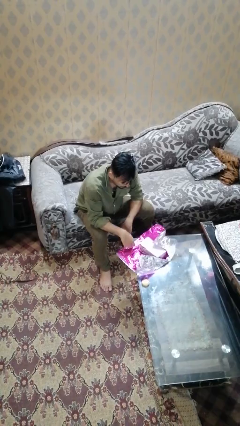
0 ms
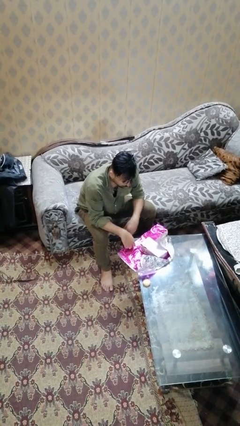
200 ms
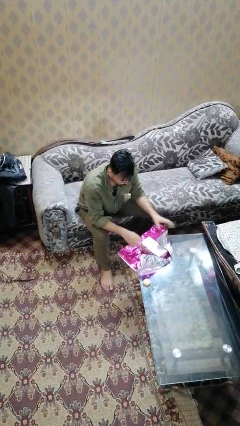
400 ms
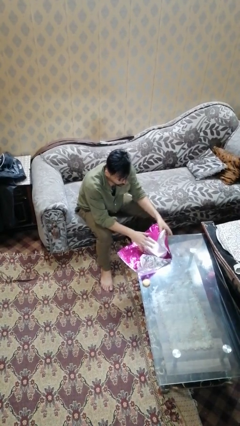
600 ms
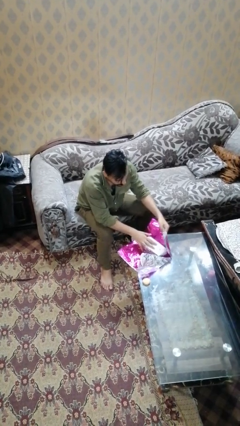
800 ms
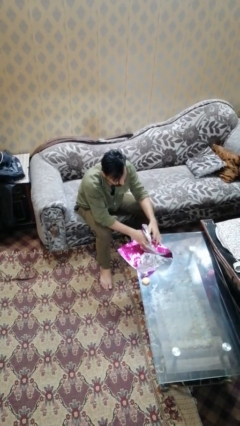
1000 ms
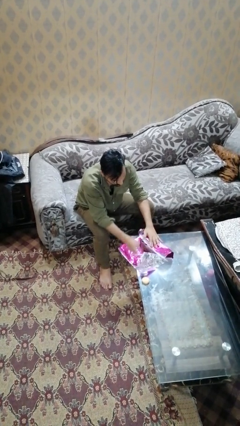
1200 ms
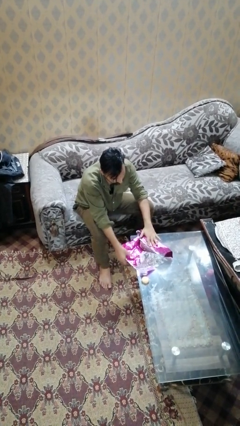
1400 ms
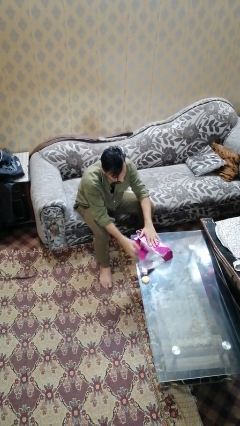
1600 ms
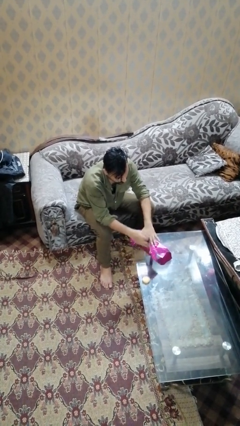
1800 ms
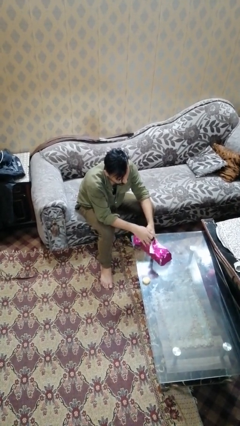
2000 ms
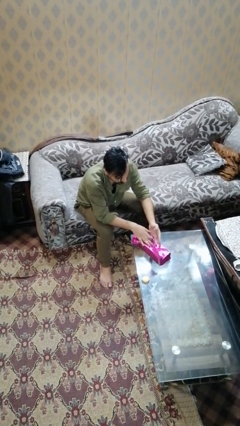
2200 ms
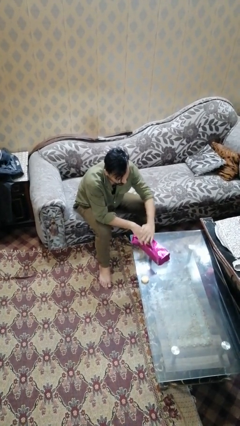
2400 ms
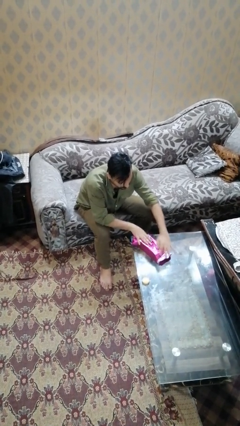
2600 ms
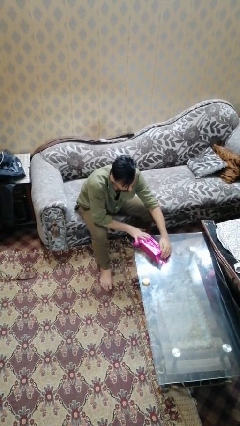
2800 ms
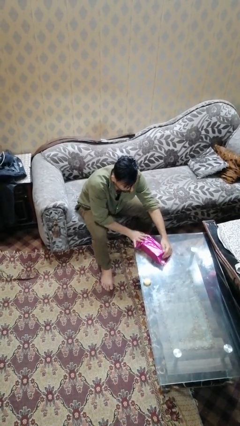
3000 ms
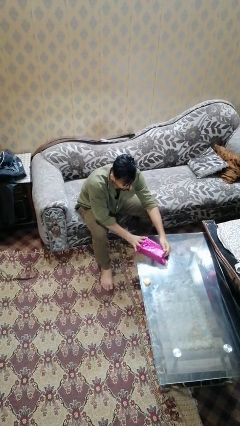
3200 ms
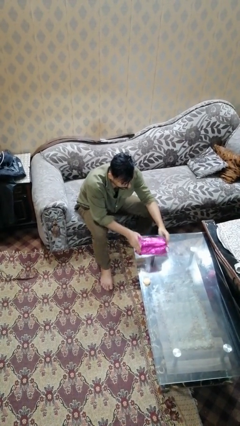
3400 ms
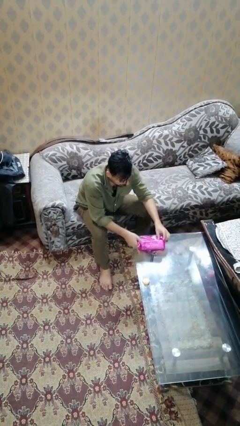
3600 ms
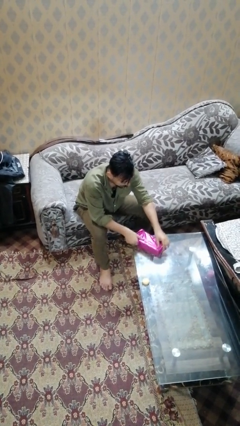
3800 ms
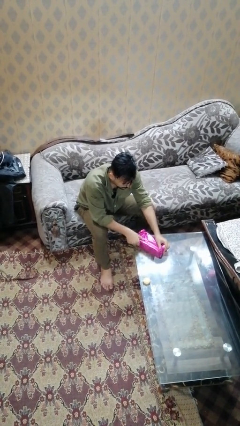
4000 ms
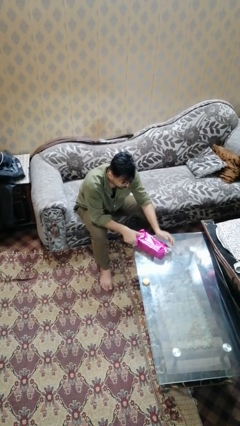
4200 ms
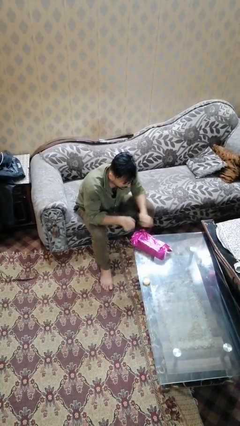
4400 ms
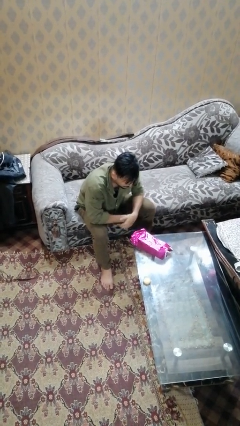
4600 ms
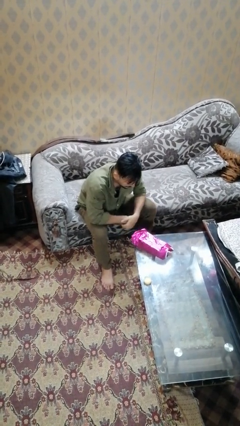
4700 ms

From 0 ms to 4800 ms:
person wraps box

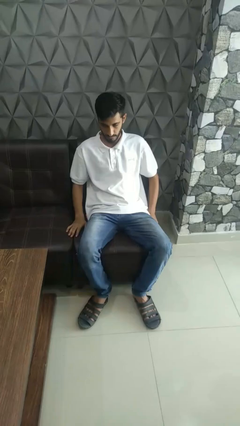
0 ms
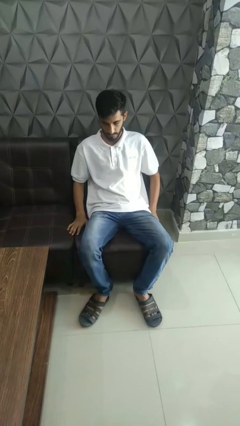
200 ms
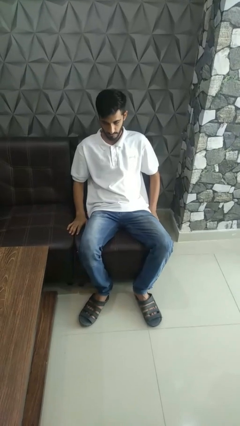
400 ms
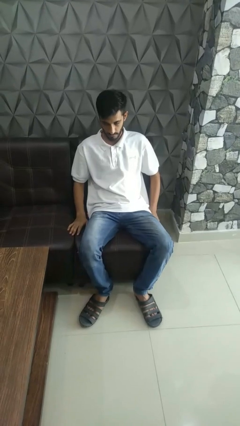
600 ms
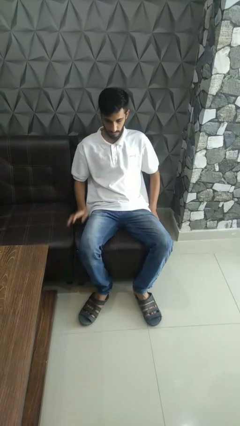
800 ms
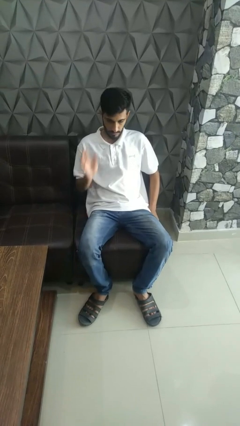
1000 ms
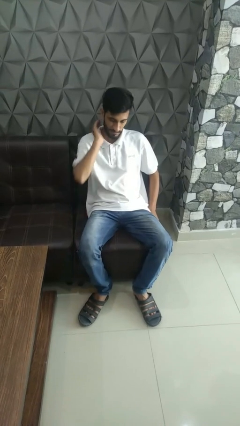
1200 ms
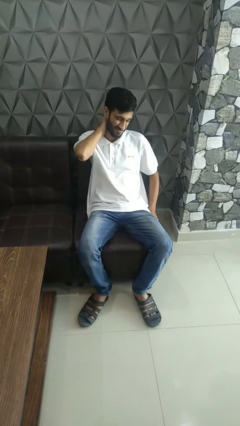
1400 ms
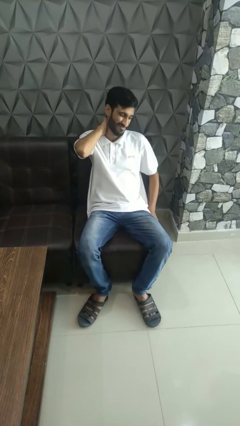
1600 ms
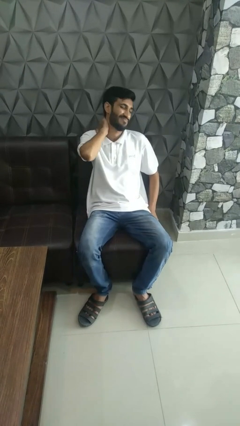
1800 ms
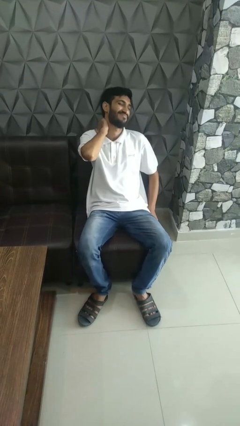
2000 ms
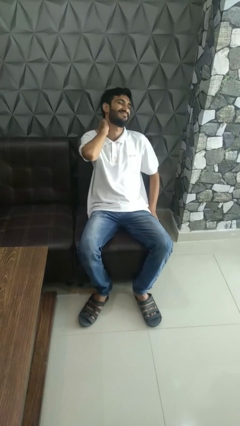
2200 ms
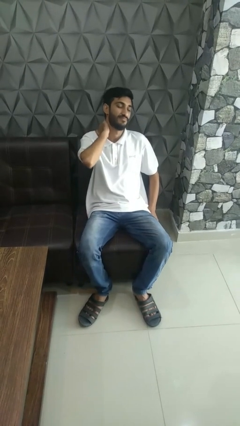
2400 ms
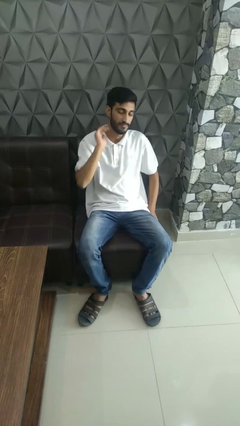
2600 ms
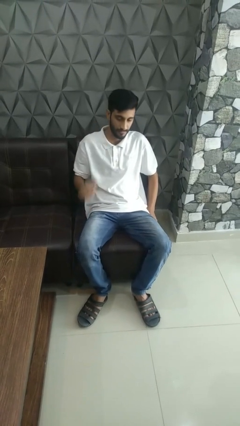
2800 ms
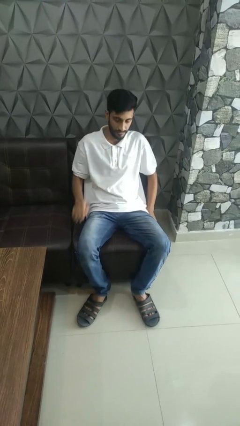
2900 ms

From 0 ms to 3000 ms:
person rubs neck

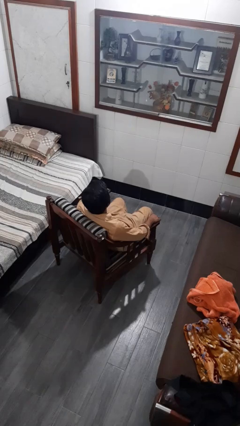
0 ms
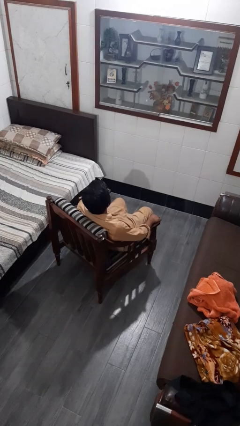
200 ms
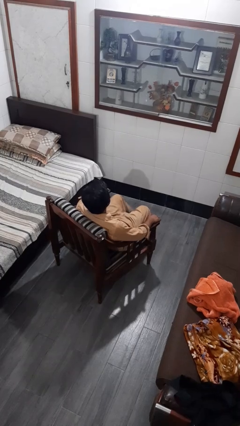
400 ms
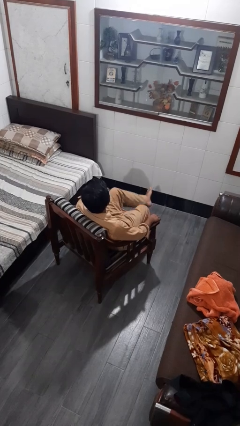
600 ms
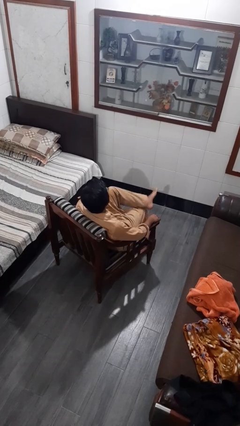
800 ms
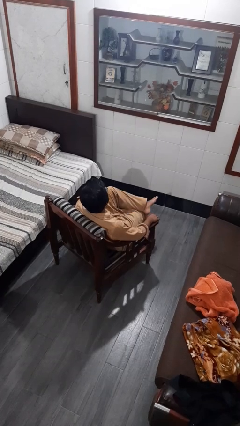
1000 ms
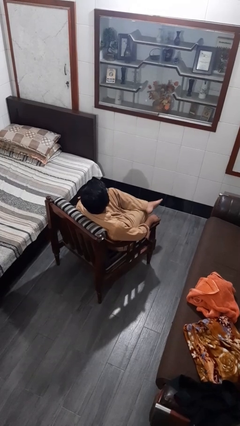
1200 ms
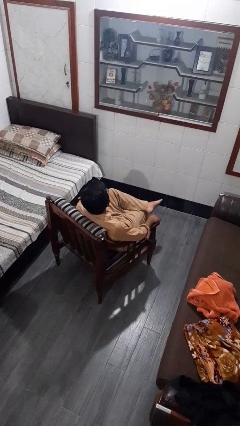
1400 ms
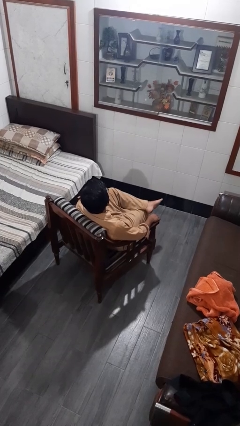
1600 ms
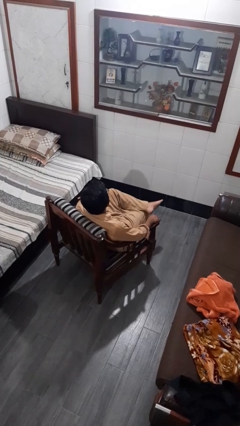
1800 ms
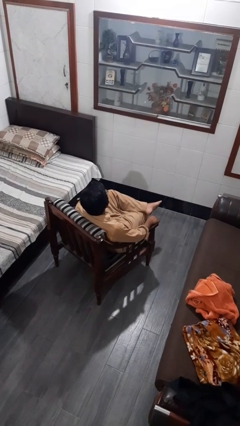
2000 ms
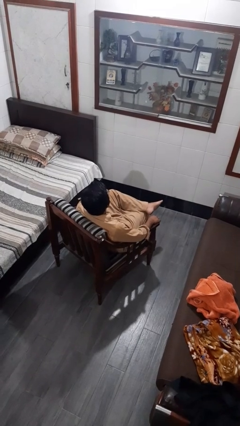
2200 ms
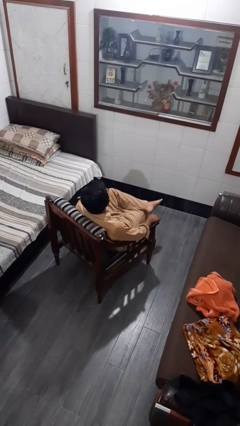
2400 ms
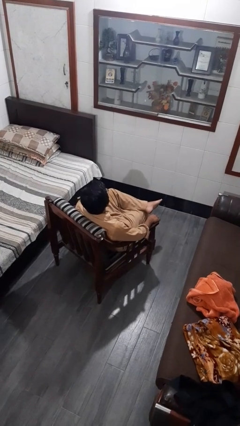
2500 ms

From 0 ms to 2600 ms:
person crosses legs

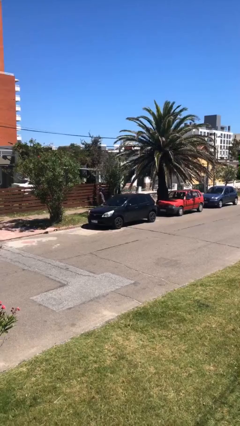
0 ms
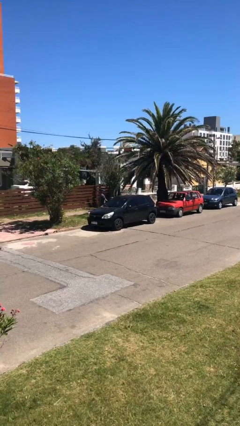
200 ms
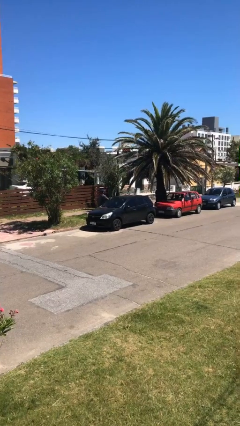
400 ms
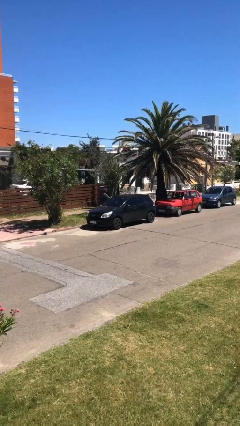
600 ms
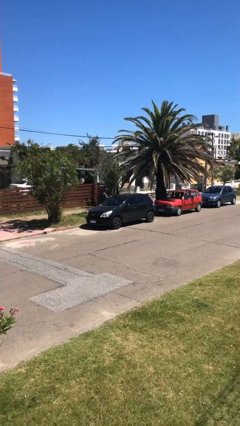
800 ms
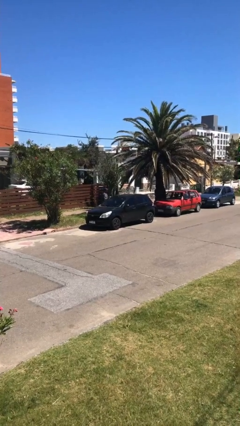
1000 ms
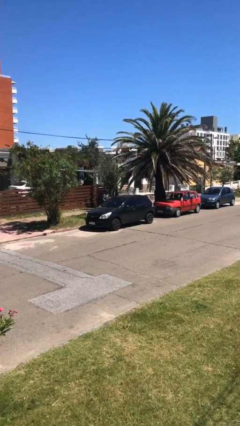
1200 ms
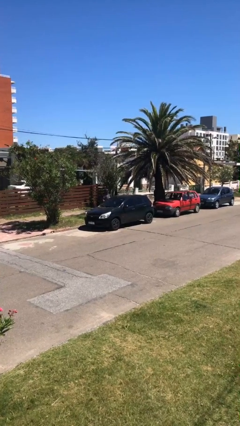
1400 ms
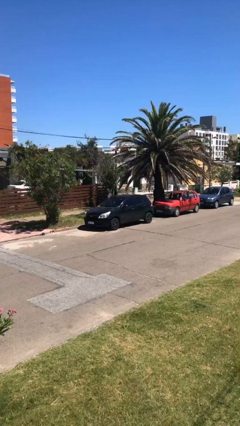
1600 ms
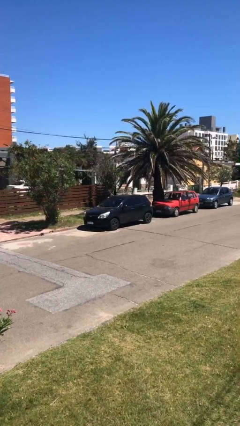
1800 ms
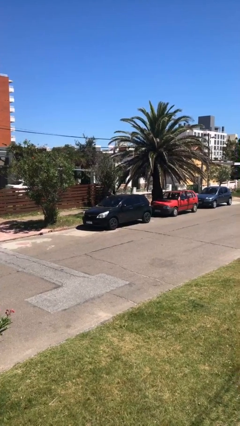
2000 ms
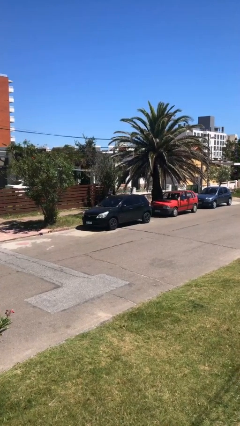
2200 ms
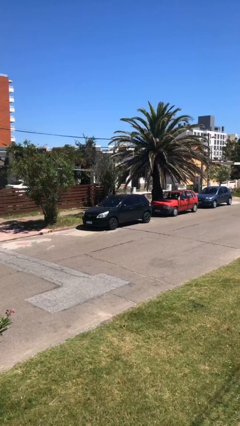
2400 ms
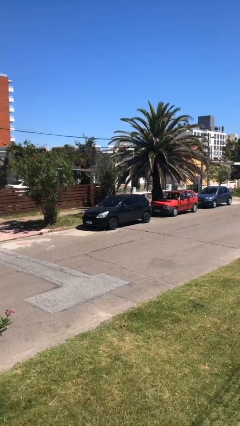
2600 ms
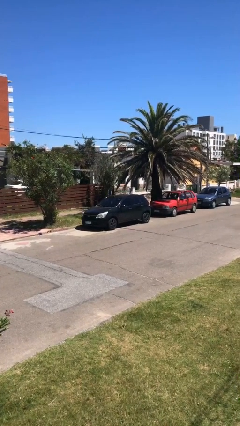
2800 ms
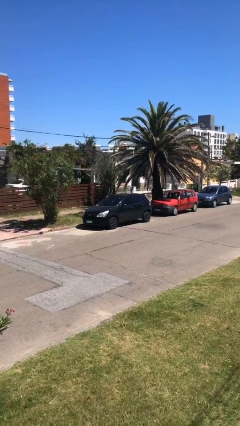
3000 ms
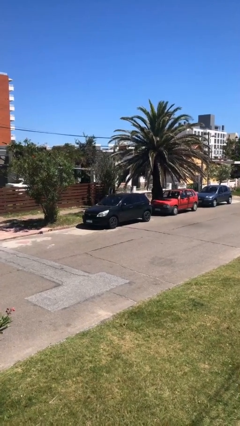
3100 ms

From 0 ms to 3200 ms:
car picks up person

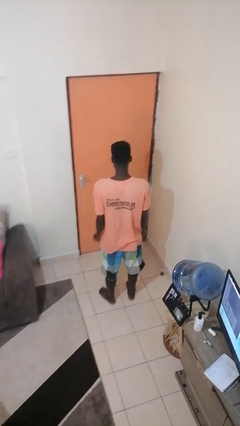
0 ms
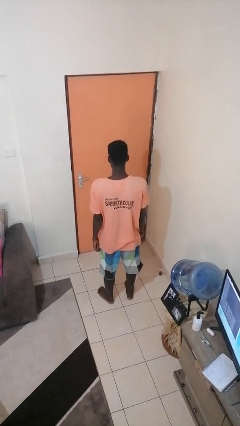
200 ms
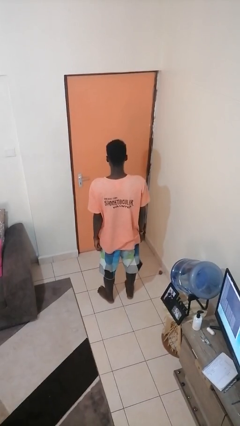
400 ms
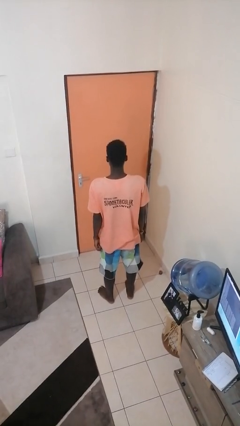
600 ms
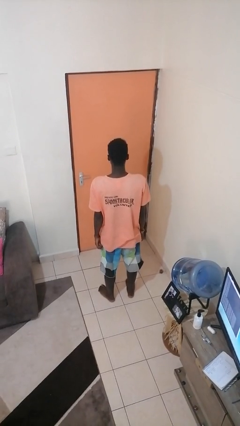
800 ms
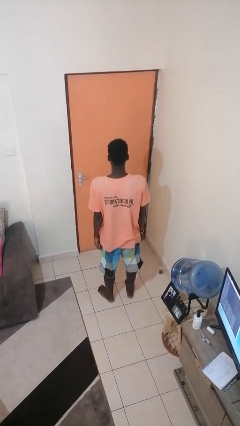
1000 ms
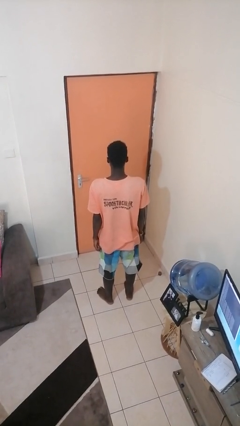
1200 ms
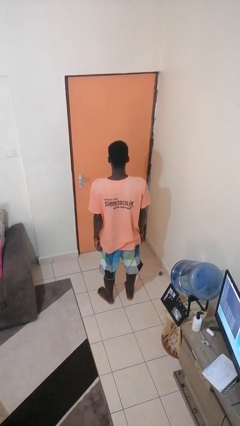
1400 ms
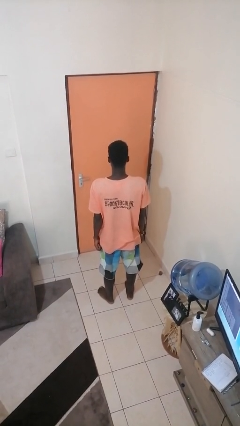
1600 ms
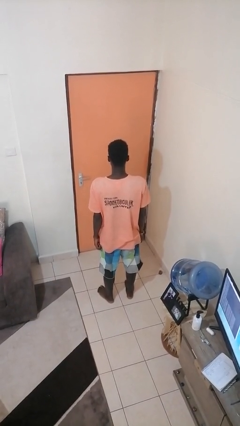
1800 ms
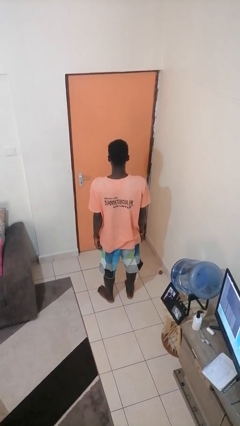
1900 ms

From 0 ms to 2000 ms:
person puts on earrings

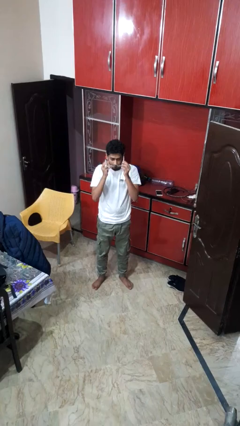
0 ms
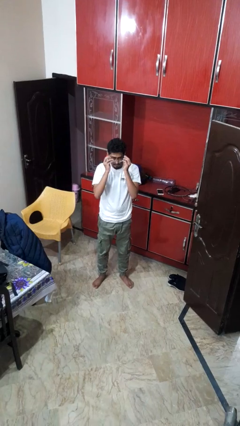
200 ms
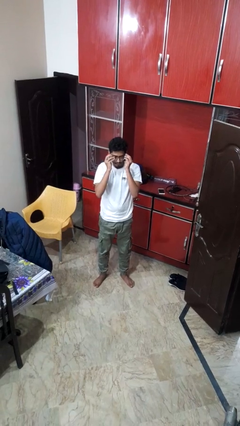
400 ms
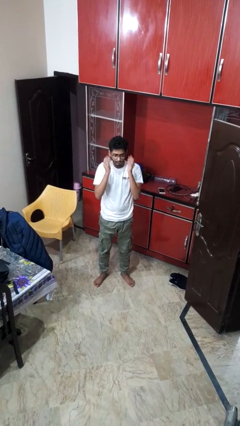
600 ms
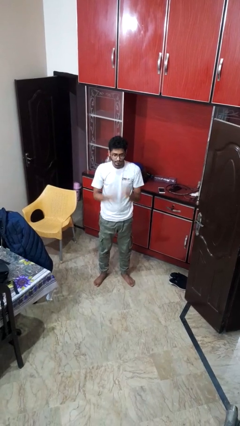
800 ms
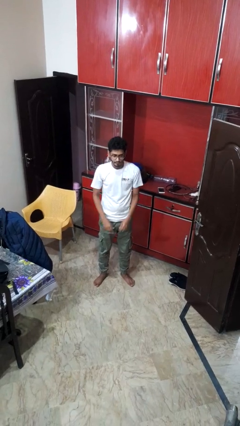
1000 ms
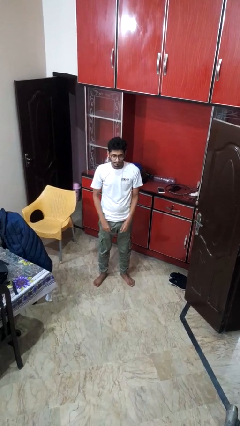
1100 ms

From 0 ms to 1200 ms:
person puts on glasses

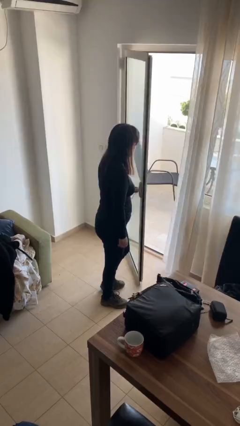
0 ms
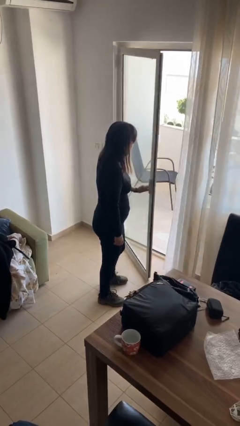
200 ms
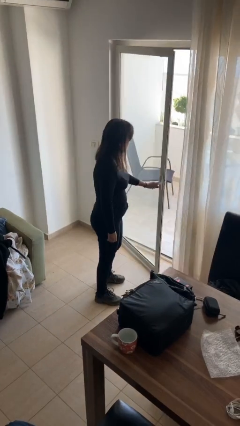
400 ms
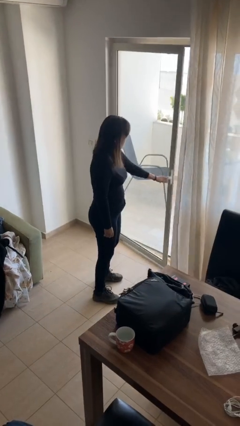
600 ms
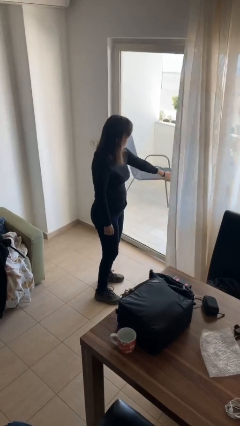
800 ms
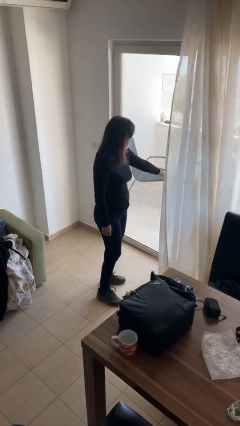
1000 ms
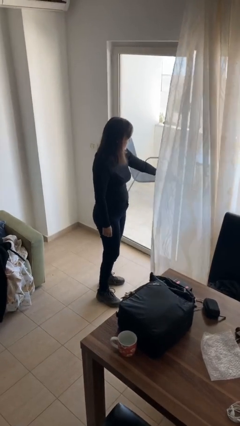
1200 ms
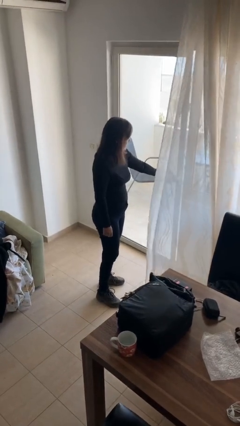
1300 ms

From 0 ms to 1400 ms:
person closes facility door
